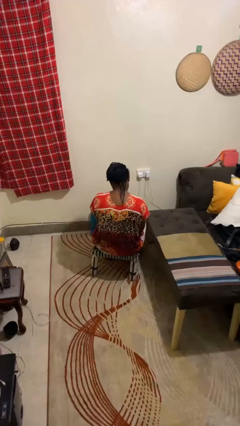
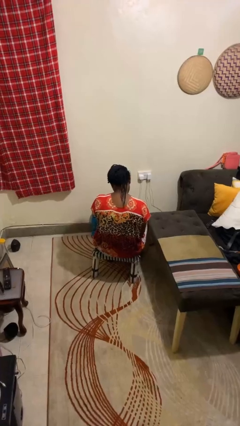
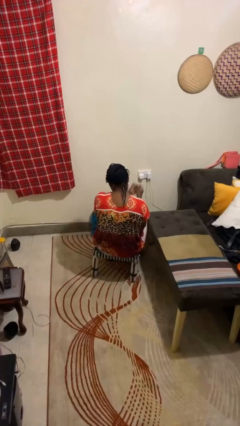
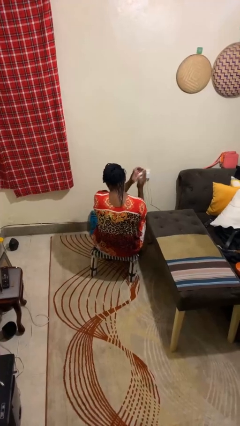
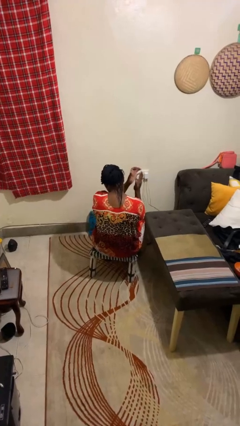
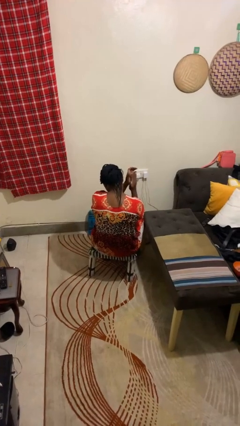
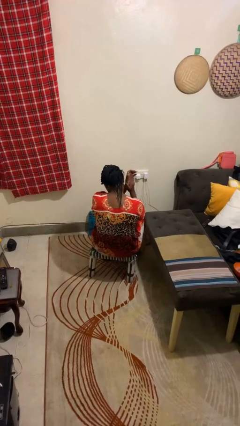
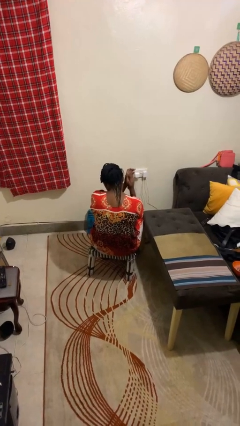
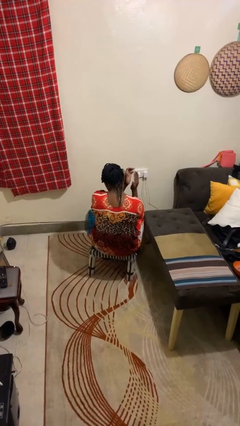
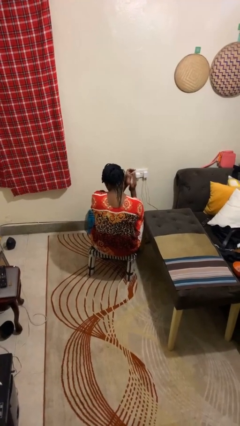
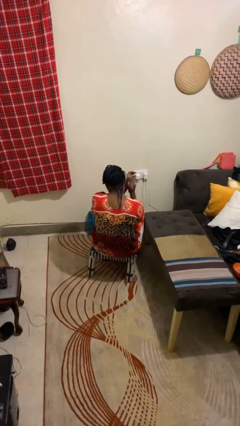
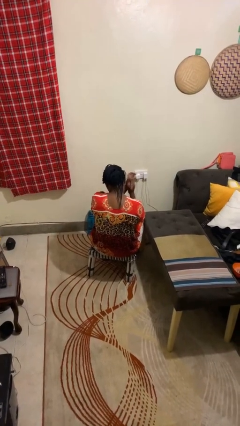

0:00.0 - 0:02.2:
person claps hands

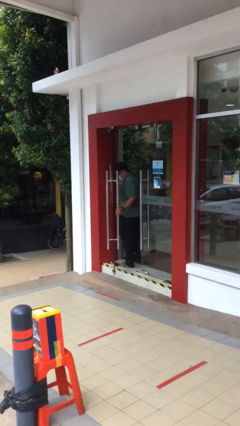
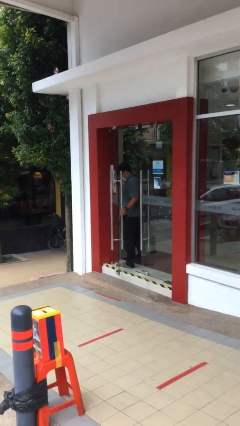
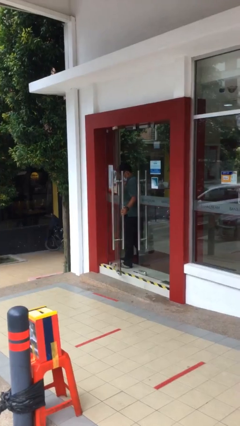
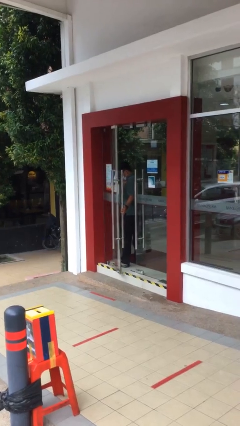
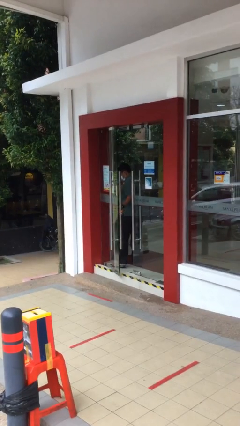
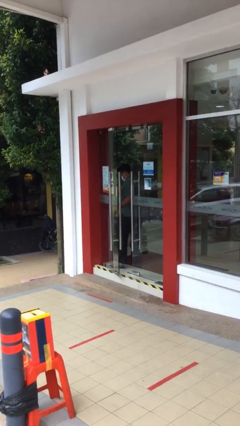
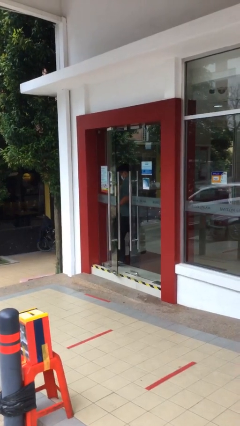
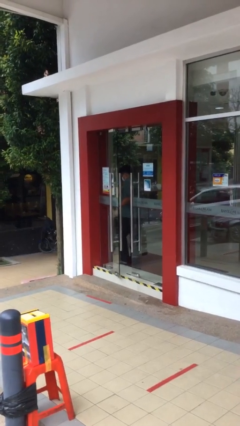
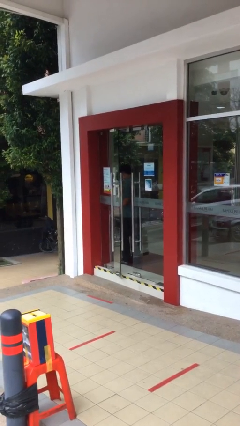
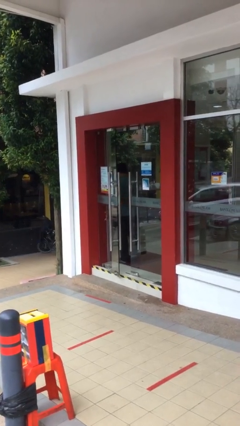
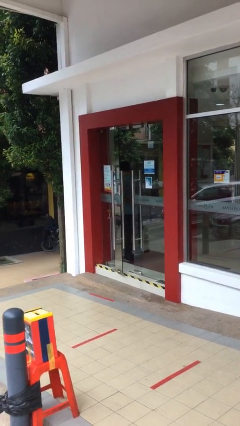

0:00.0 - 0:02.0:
person closes facility door

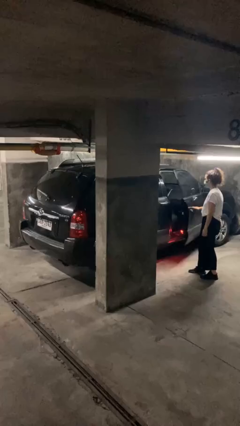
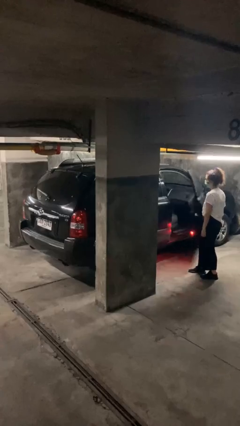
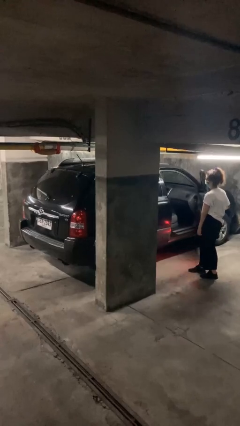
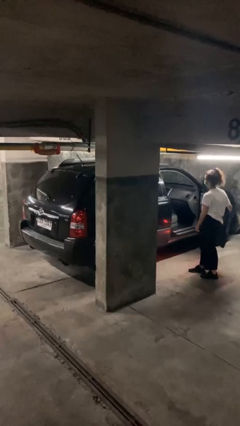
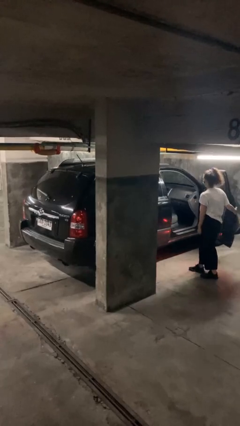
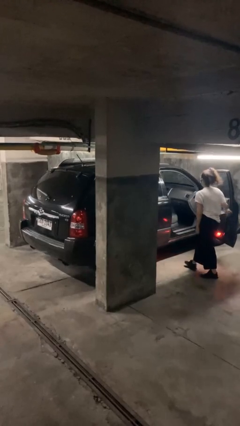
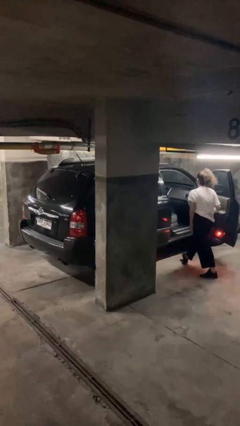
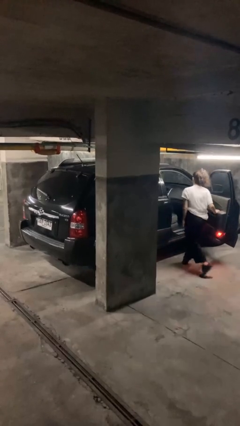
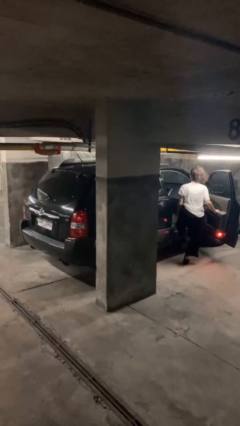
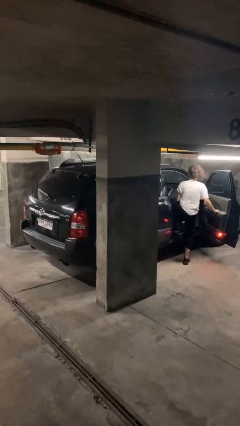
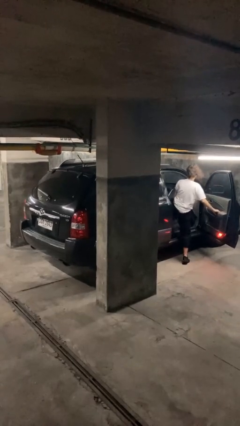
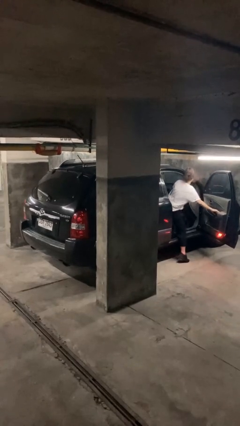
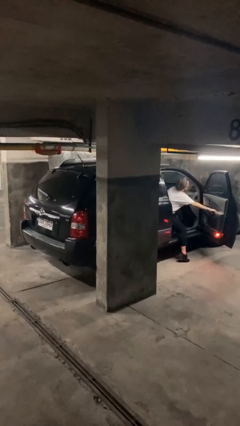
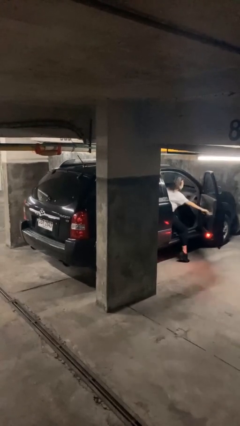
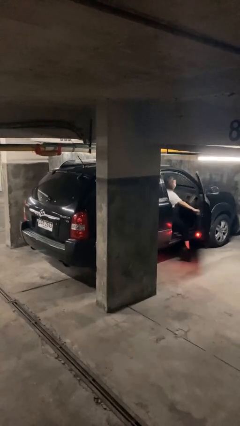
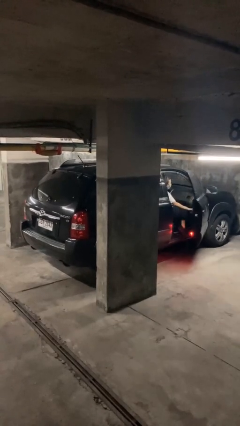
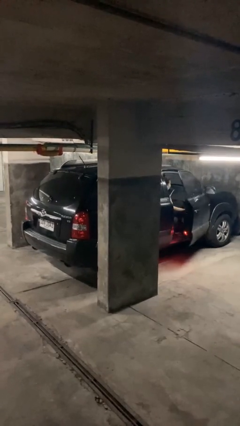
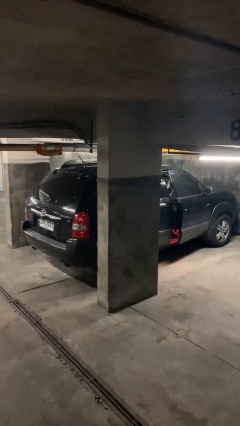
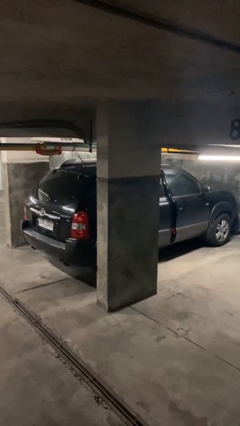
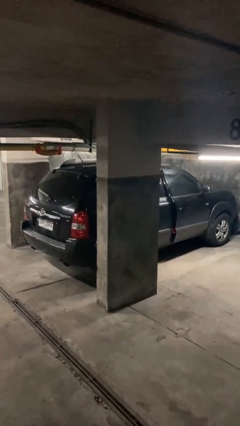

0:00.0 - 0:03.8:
car picks up person

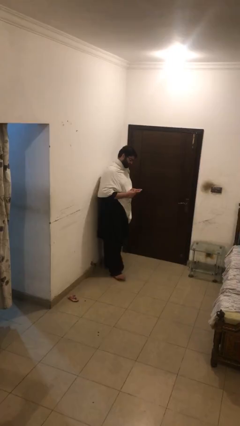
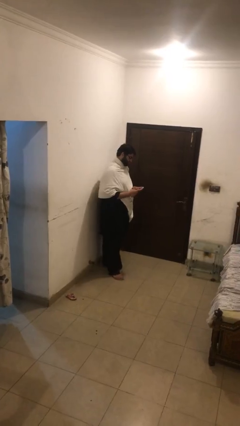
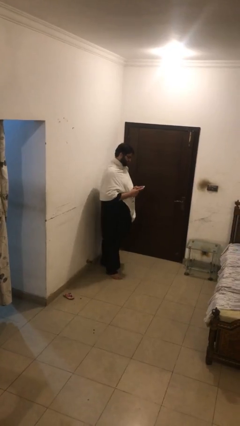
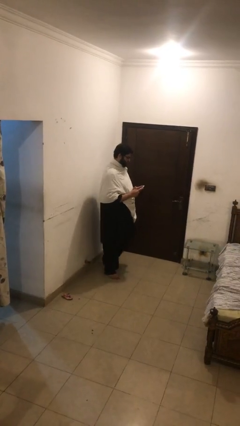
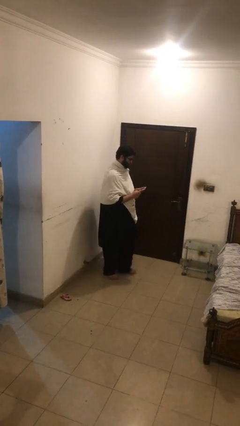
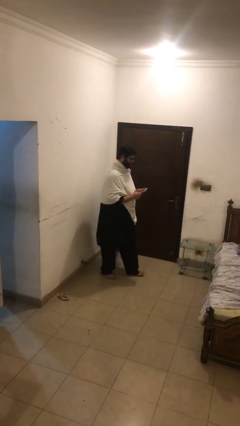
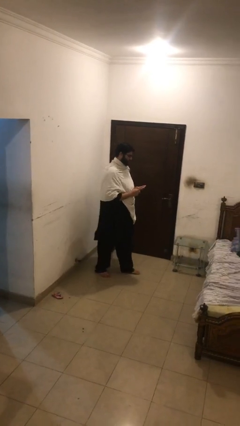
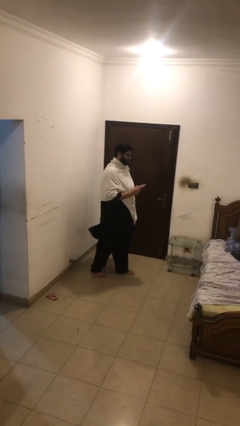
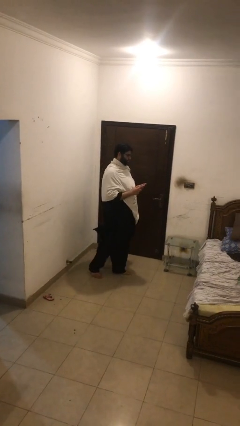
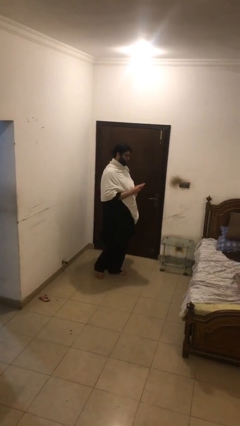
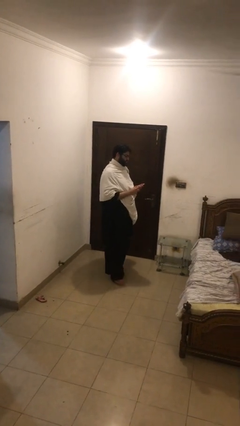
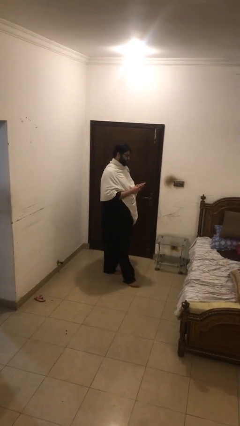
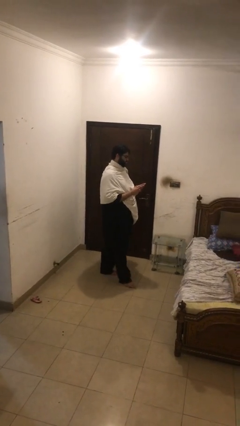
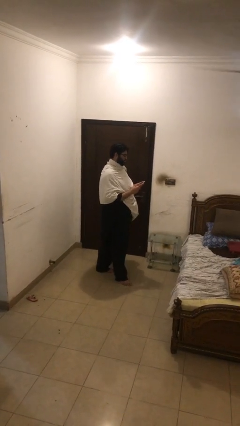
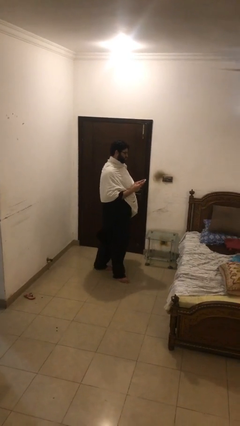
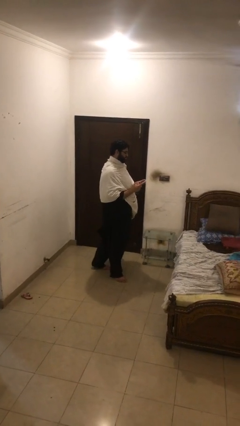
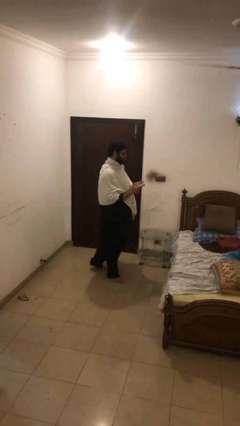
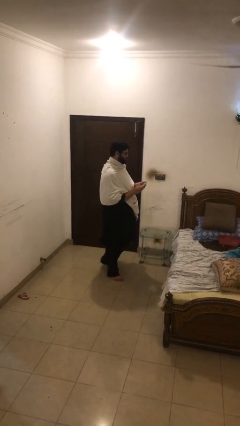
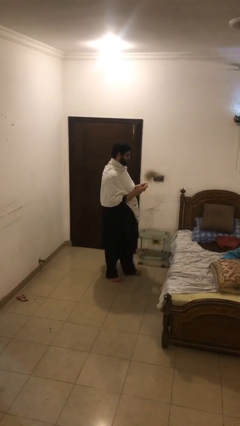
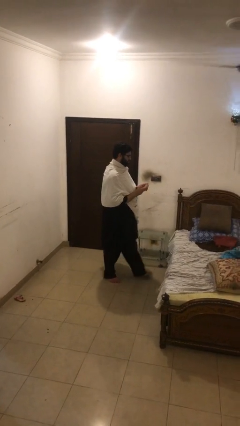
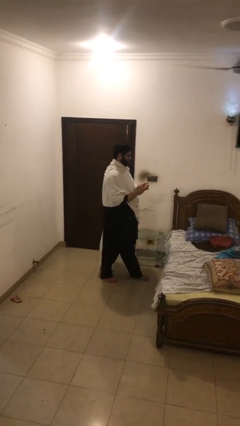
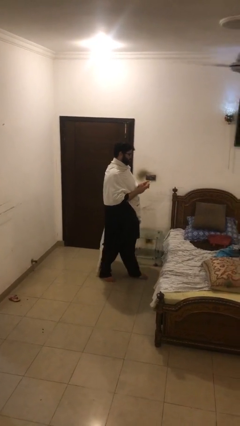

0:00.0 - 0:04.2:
person texts on phone

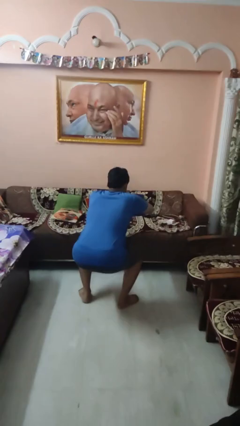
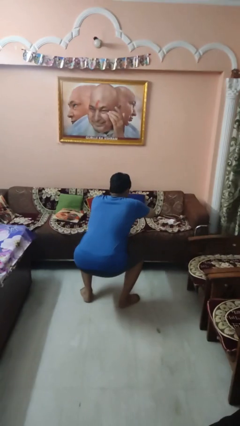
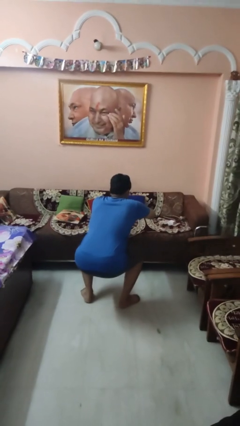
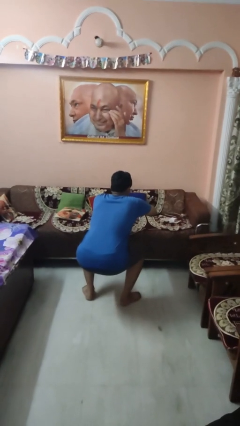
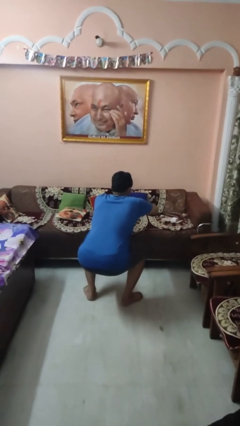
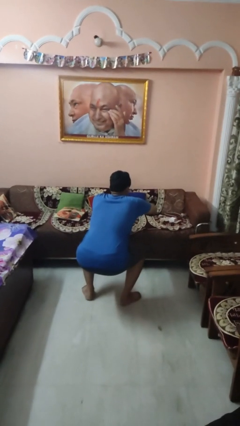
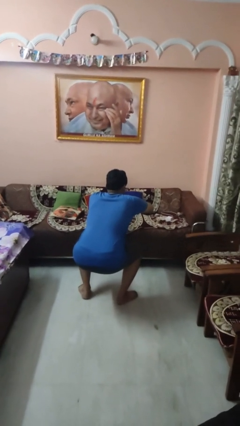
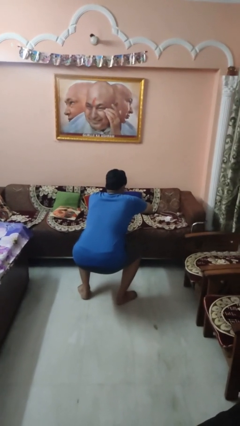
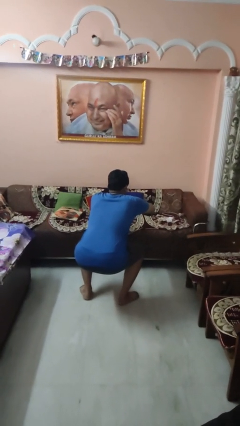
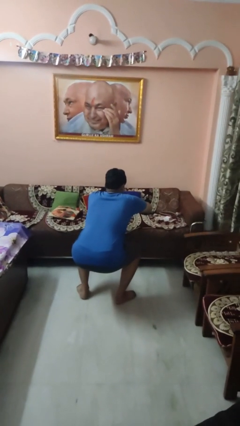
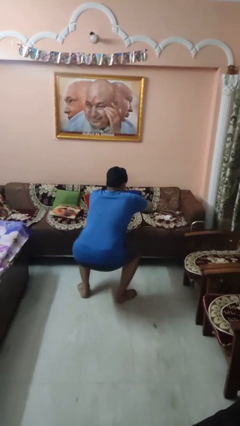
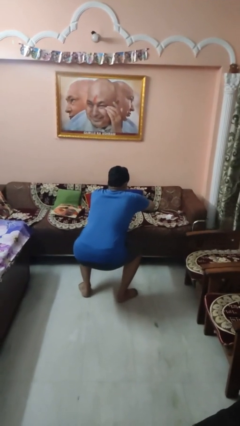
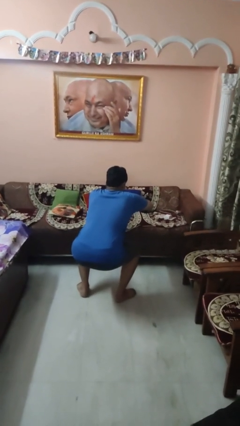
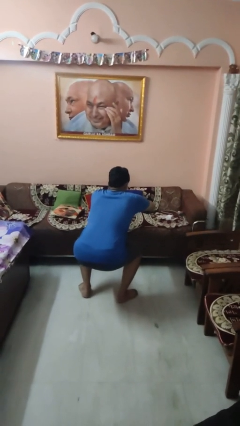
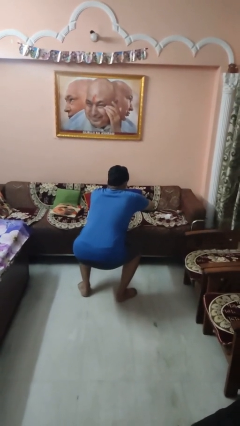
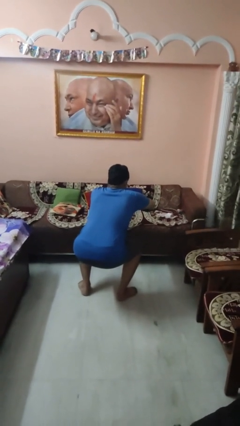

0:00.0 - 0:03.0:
person squats

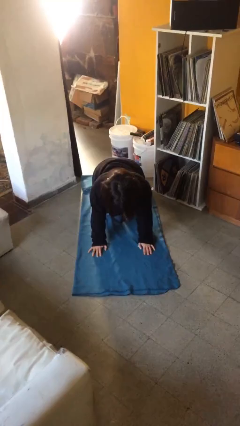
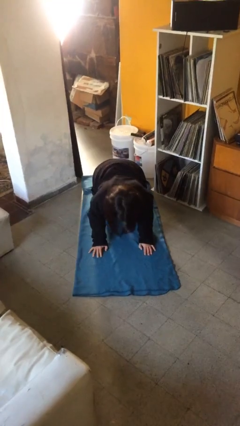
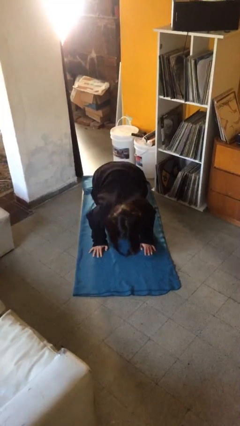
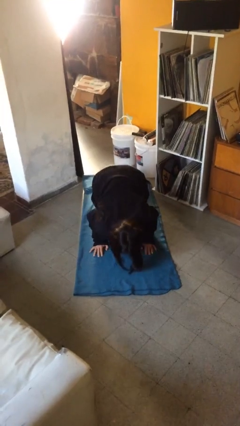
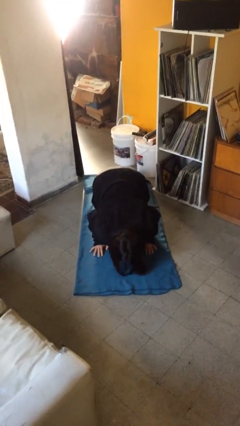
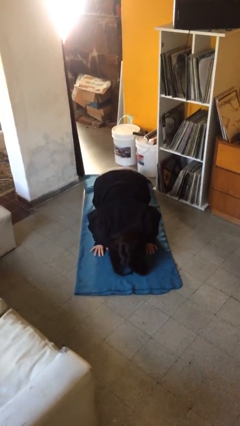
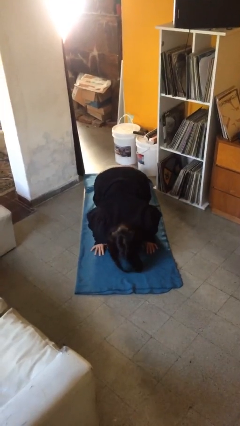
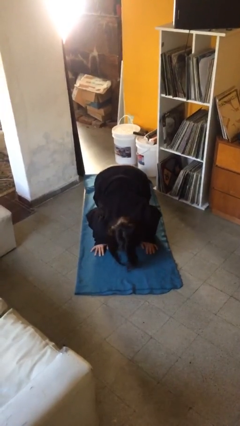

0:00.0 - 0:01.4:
person exercises with pushup

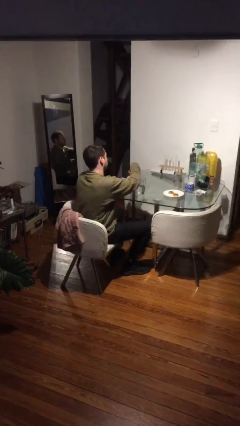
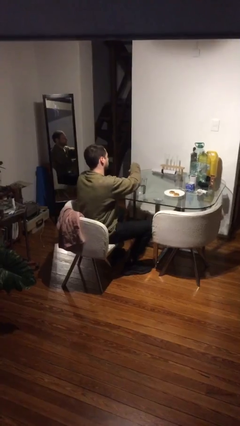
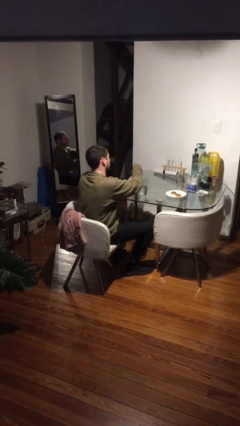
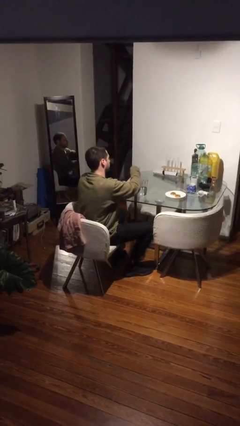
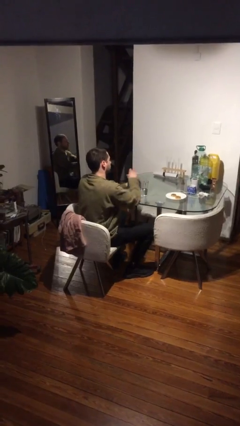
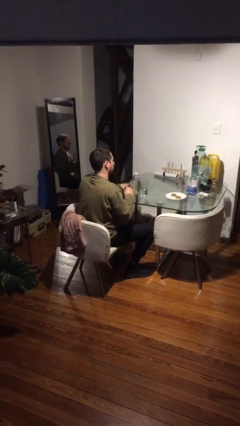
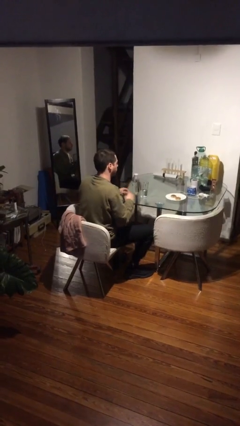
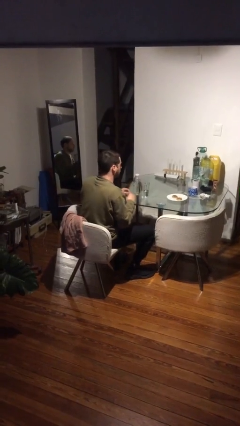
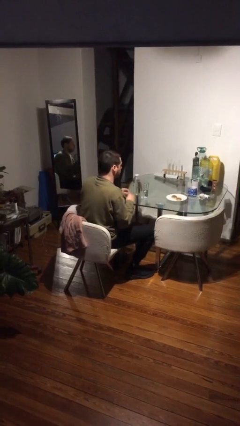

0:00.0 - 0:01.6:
person screws lid to bottle
